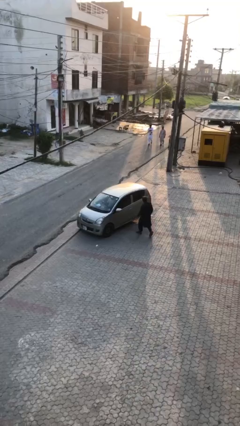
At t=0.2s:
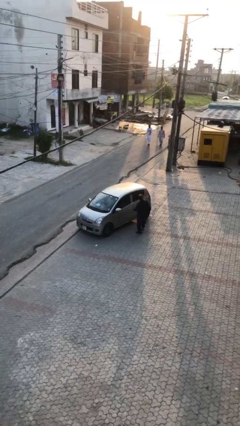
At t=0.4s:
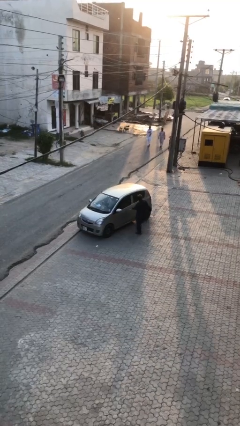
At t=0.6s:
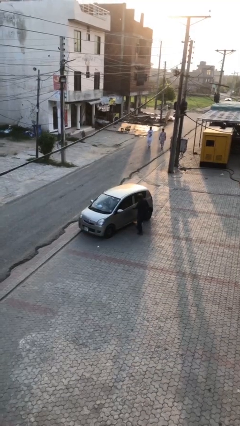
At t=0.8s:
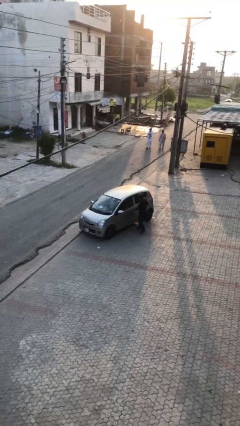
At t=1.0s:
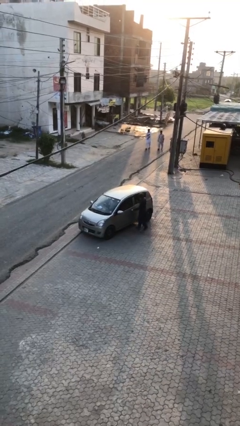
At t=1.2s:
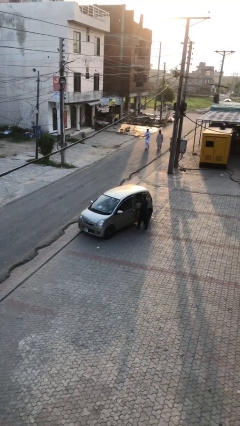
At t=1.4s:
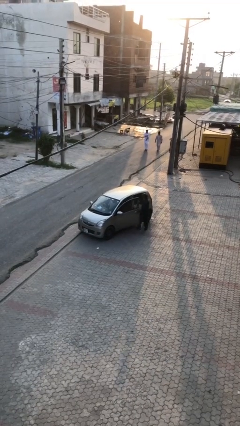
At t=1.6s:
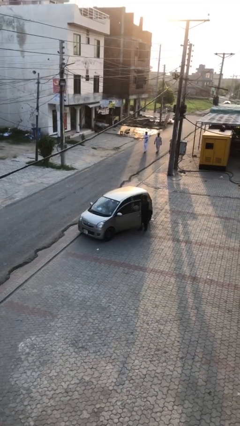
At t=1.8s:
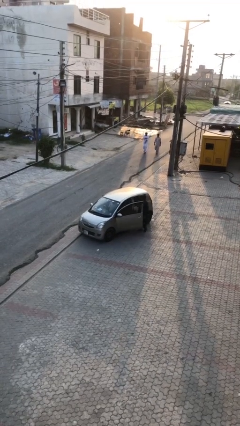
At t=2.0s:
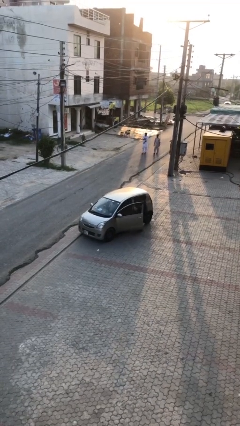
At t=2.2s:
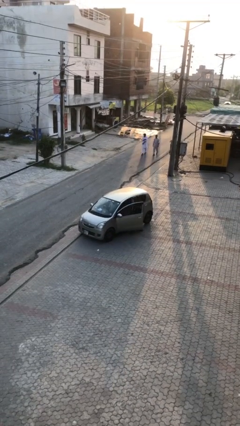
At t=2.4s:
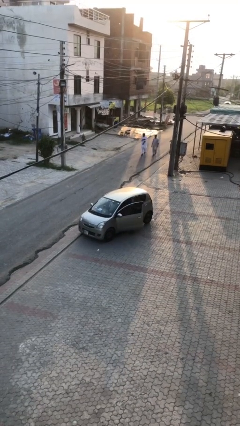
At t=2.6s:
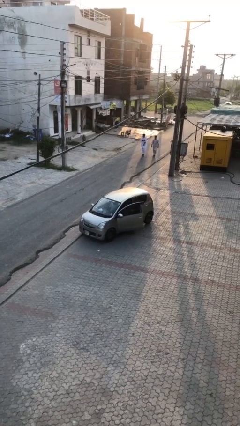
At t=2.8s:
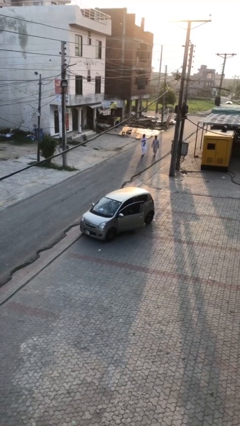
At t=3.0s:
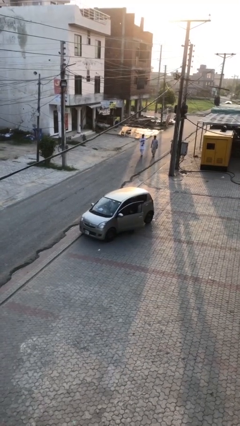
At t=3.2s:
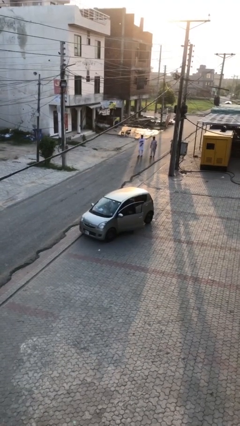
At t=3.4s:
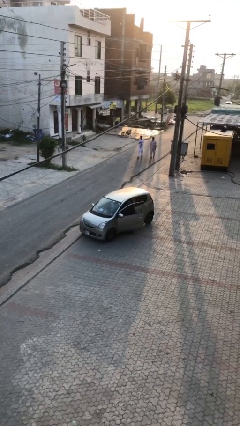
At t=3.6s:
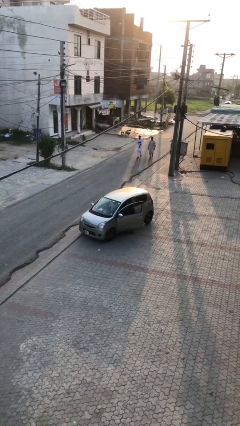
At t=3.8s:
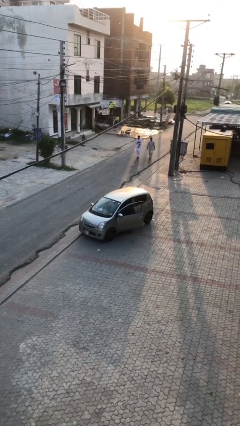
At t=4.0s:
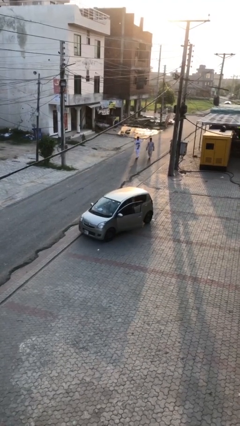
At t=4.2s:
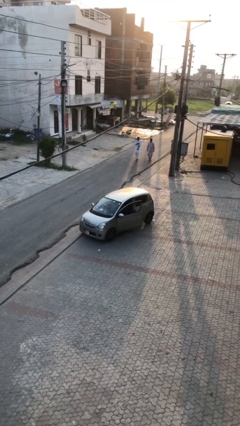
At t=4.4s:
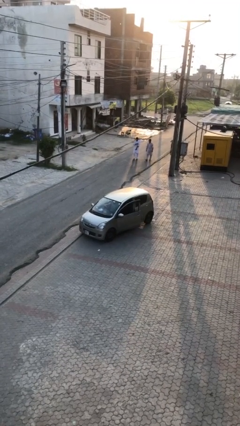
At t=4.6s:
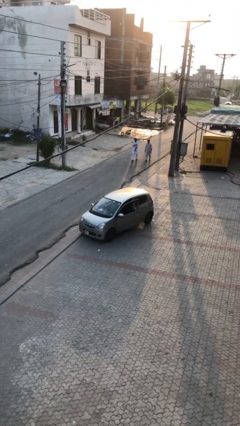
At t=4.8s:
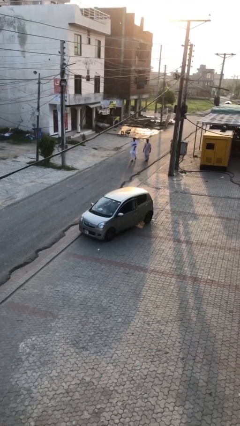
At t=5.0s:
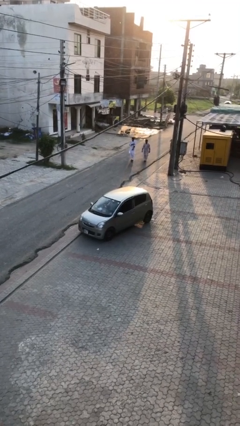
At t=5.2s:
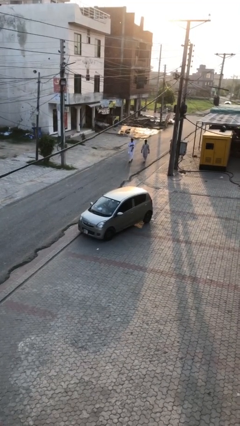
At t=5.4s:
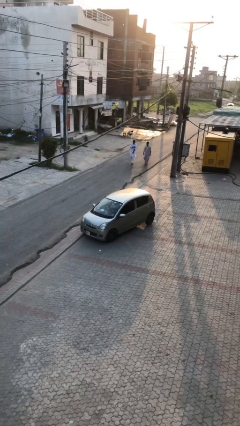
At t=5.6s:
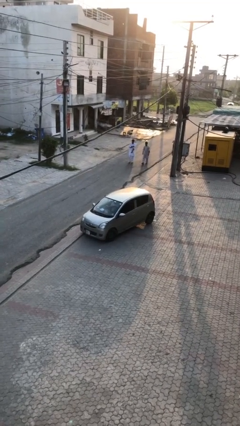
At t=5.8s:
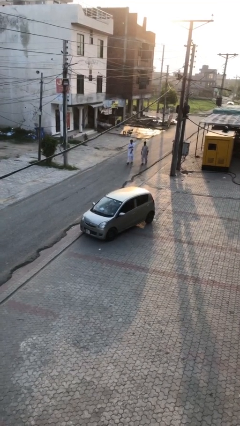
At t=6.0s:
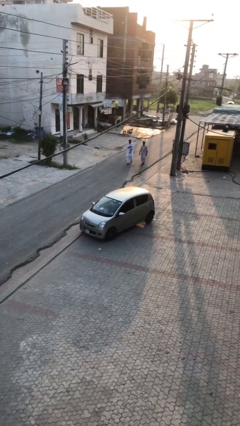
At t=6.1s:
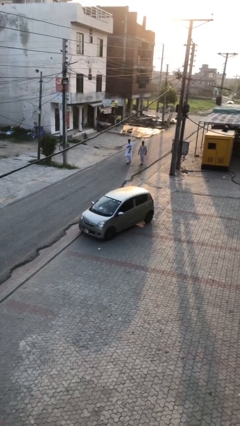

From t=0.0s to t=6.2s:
car picks up person

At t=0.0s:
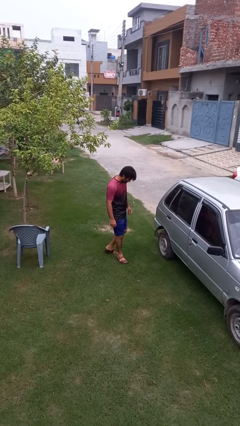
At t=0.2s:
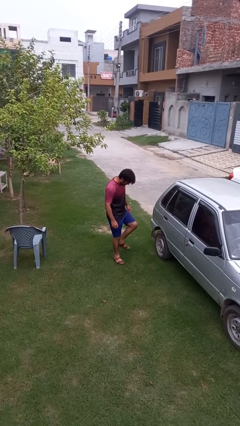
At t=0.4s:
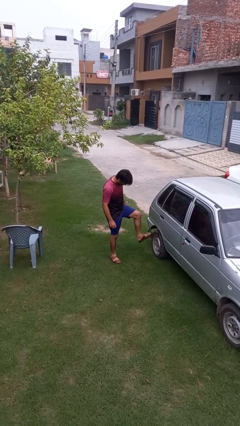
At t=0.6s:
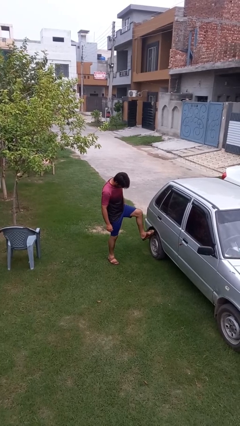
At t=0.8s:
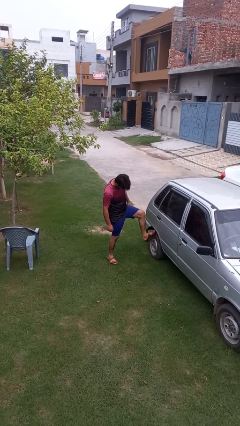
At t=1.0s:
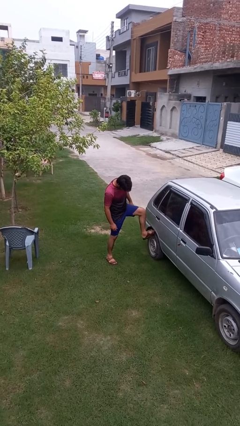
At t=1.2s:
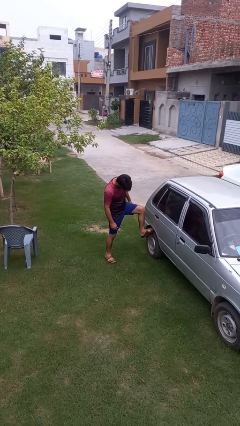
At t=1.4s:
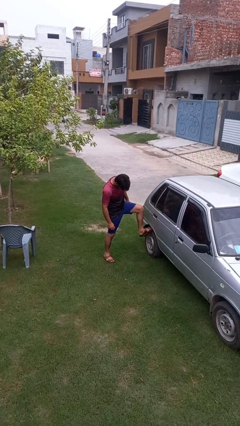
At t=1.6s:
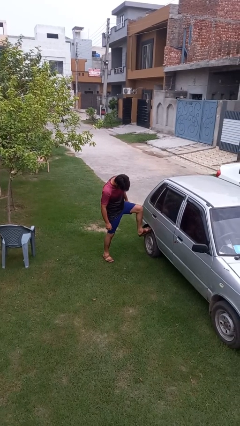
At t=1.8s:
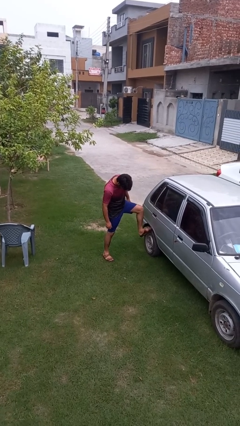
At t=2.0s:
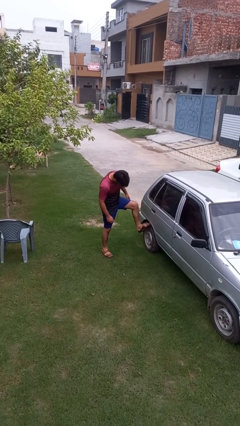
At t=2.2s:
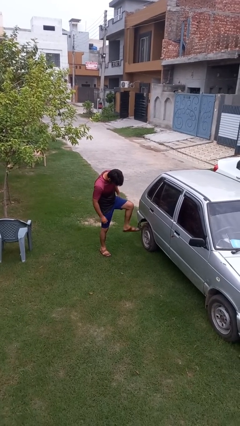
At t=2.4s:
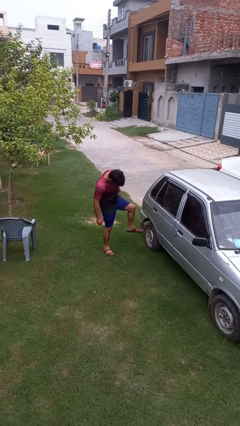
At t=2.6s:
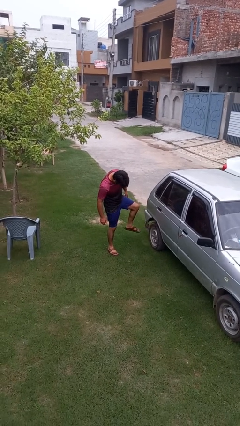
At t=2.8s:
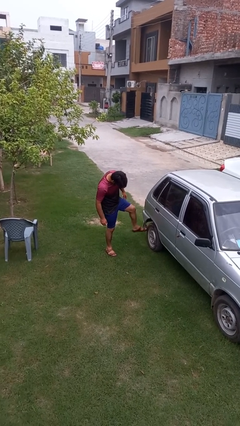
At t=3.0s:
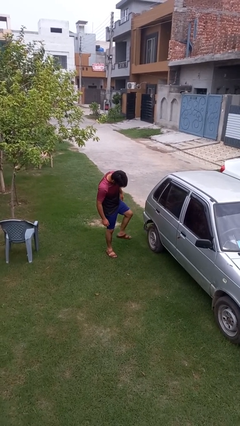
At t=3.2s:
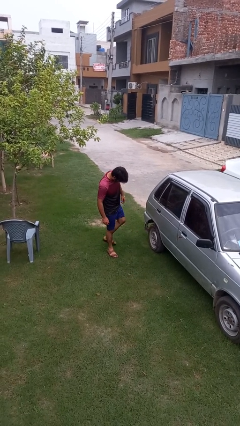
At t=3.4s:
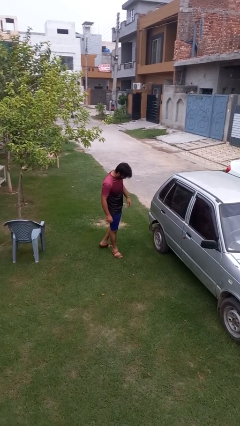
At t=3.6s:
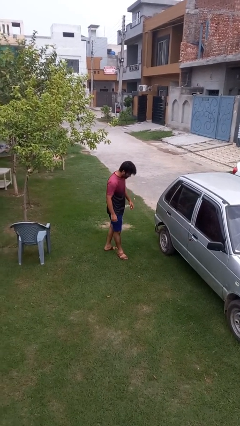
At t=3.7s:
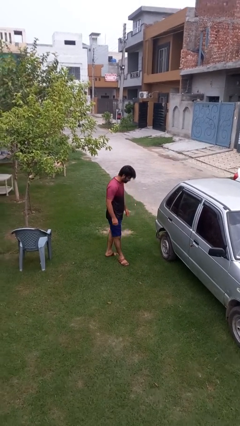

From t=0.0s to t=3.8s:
person kicks car tires

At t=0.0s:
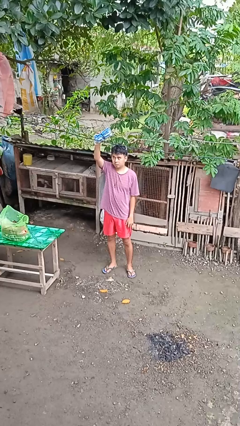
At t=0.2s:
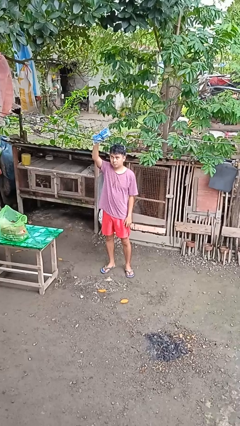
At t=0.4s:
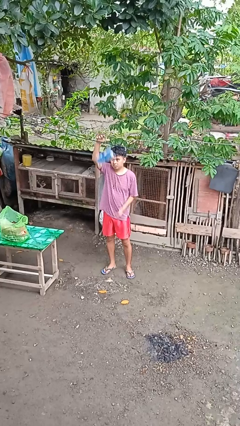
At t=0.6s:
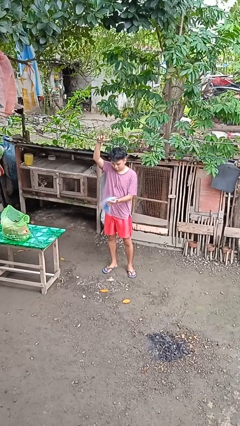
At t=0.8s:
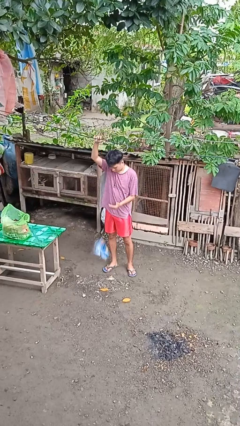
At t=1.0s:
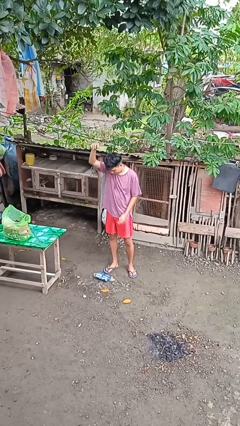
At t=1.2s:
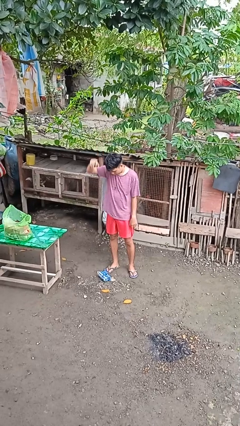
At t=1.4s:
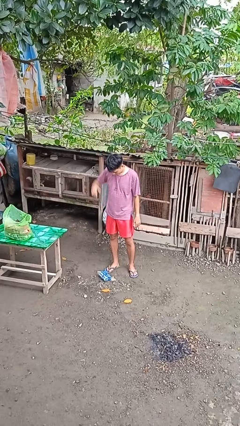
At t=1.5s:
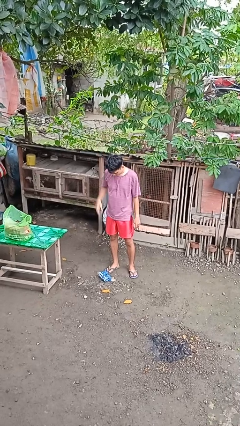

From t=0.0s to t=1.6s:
person drops object

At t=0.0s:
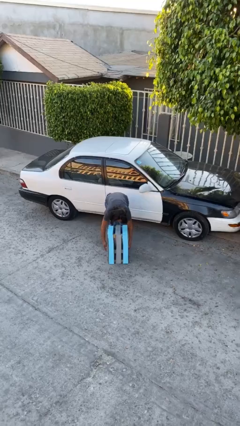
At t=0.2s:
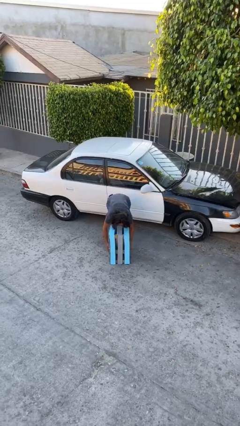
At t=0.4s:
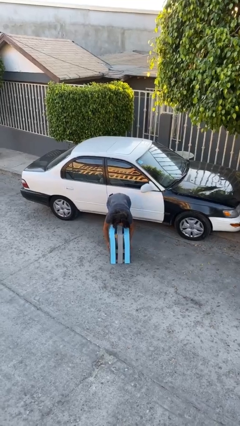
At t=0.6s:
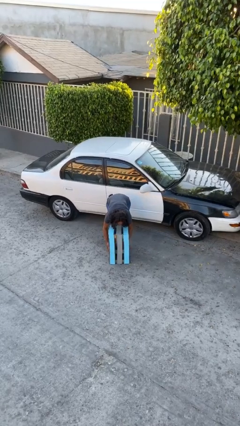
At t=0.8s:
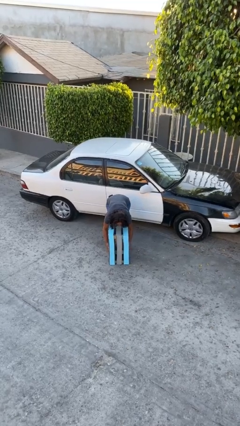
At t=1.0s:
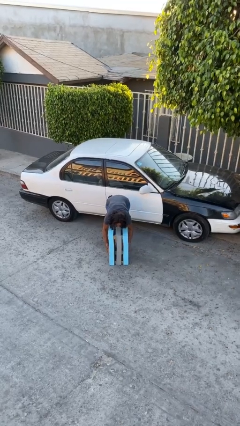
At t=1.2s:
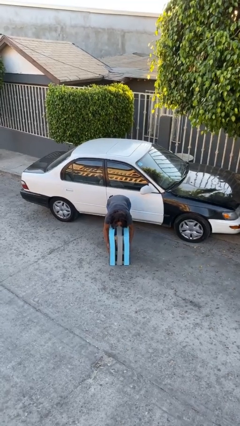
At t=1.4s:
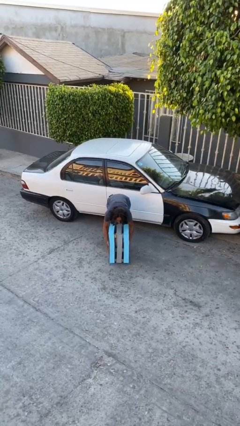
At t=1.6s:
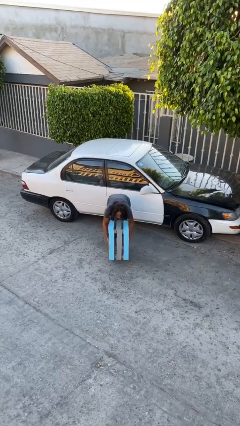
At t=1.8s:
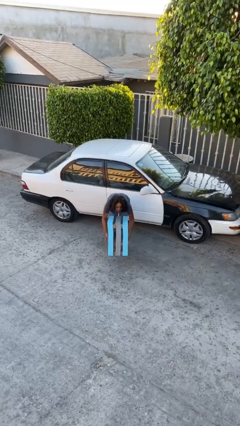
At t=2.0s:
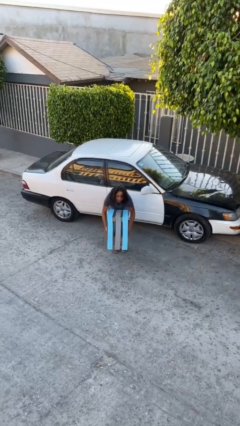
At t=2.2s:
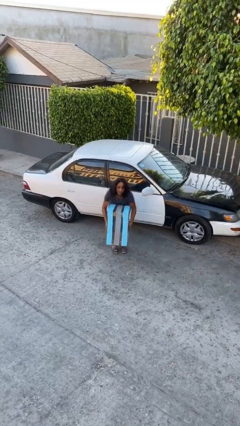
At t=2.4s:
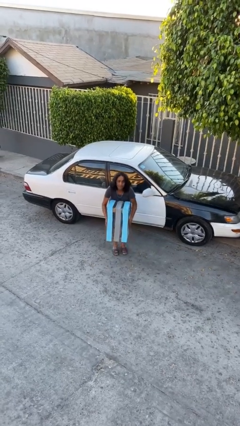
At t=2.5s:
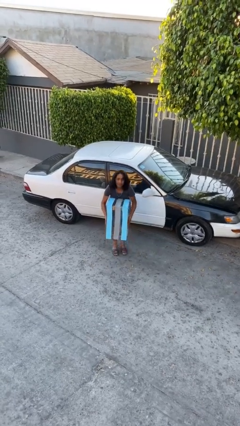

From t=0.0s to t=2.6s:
person picks up object from floor

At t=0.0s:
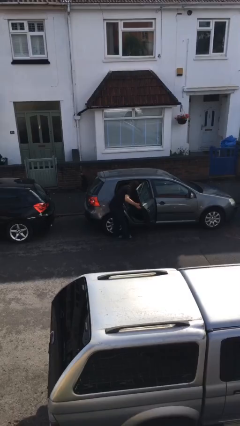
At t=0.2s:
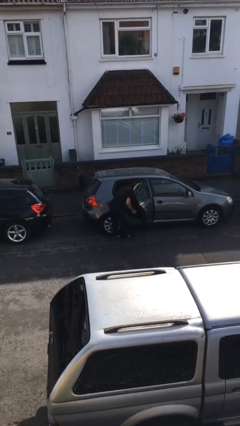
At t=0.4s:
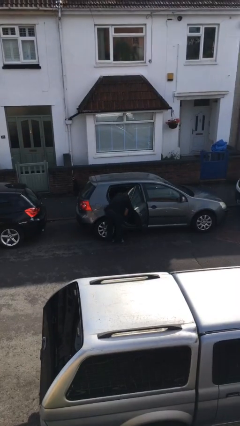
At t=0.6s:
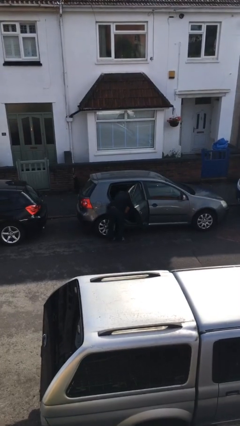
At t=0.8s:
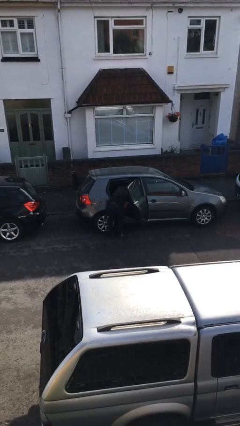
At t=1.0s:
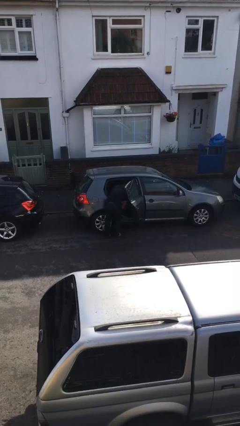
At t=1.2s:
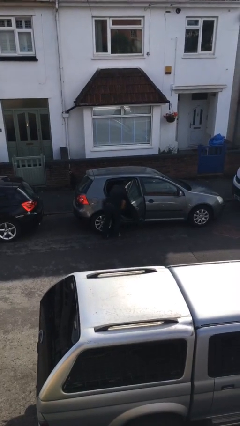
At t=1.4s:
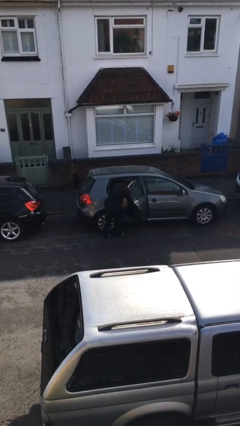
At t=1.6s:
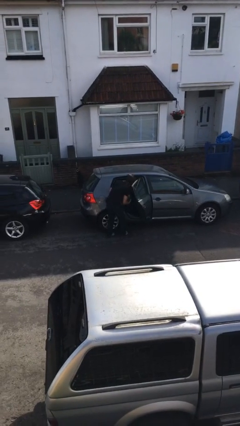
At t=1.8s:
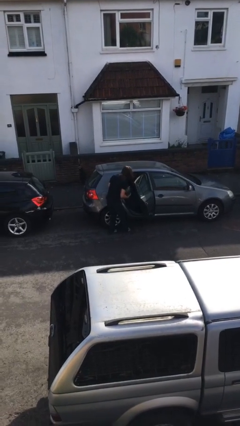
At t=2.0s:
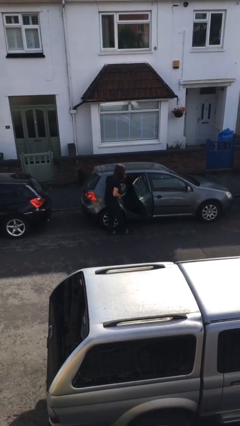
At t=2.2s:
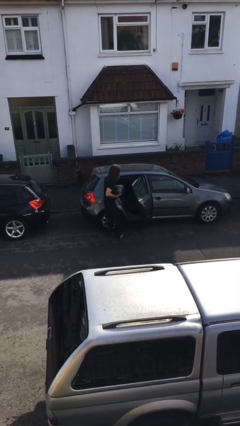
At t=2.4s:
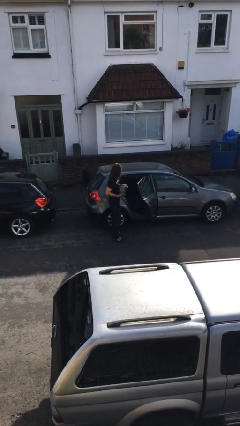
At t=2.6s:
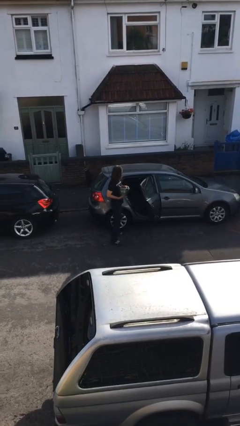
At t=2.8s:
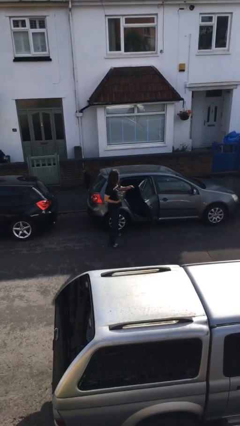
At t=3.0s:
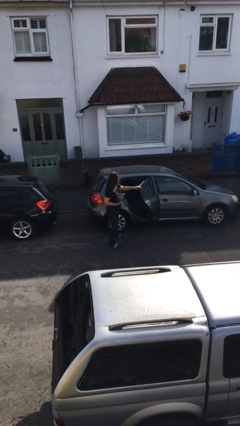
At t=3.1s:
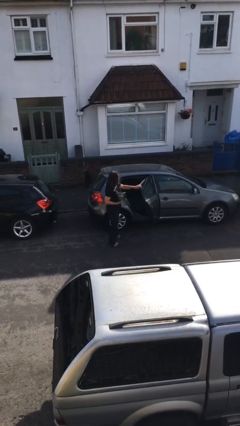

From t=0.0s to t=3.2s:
person unloads car

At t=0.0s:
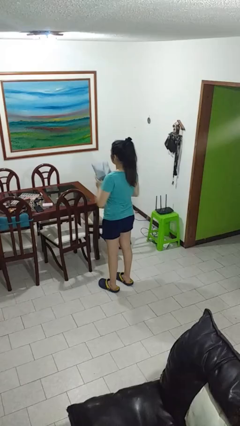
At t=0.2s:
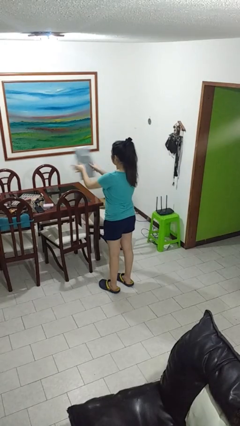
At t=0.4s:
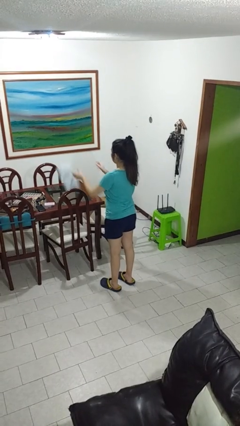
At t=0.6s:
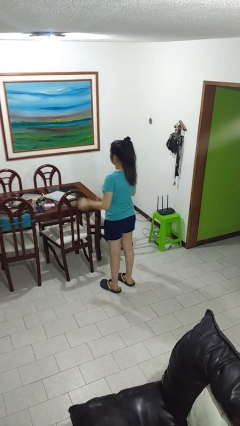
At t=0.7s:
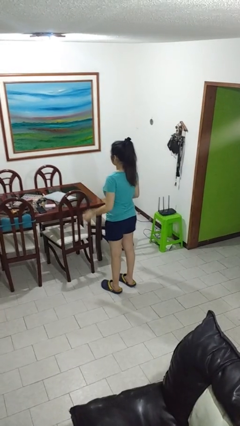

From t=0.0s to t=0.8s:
person throws object on table
